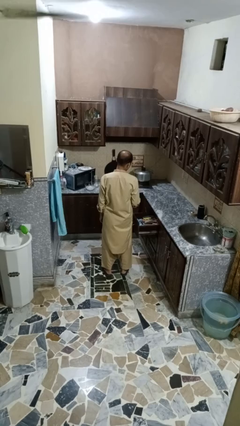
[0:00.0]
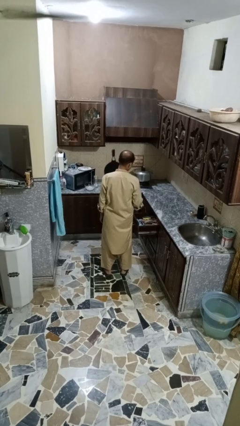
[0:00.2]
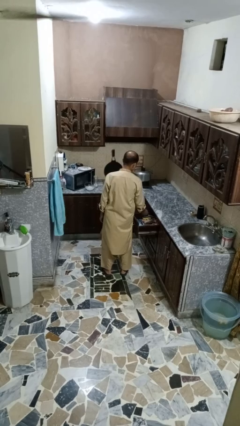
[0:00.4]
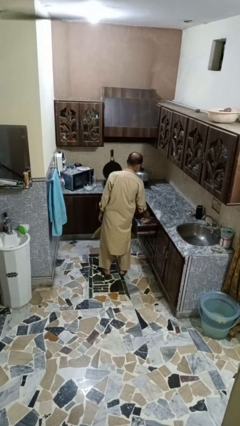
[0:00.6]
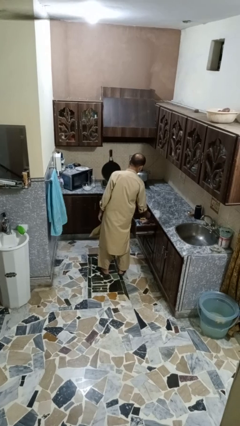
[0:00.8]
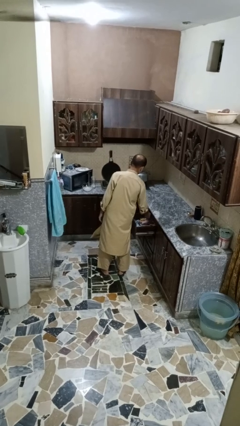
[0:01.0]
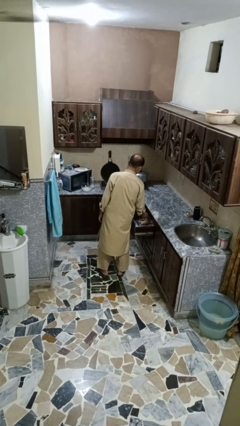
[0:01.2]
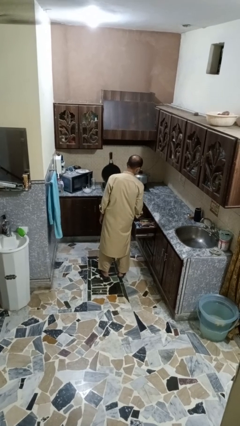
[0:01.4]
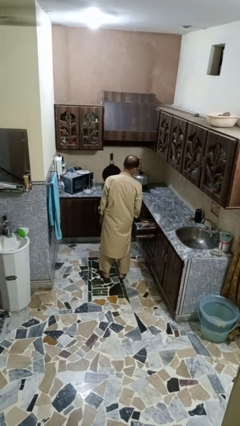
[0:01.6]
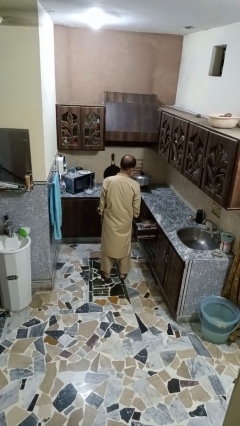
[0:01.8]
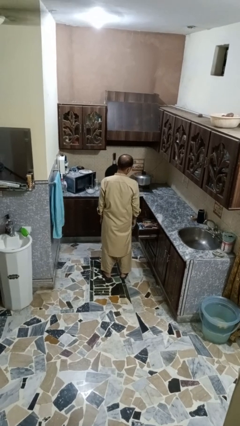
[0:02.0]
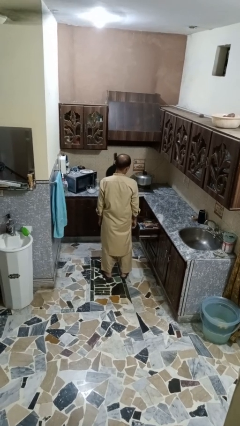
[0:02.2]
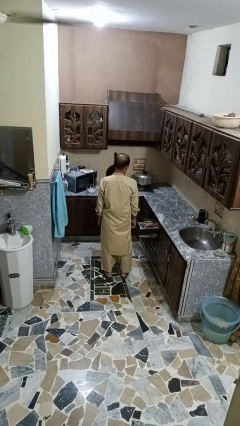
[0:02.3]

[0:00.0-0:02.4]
person puts object into kitchen drawer

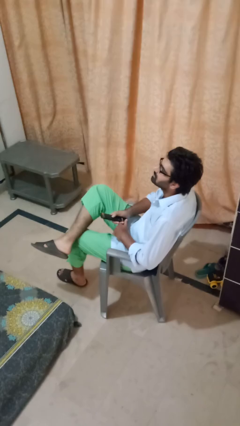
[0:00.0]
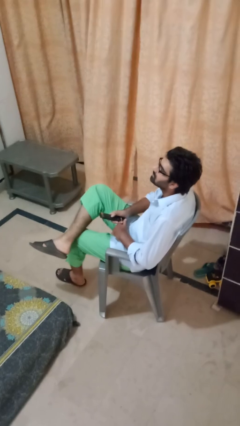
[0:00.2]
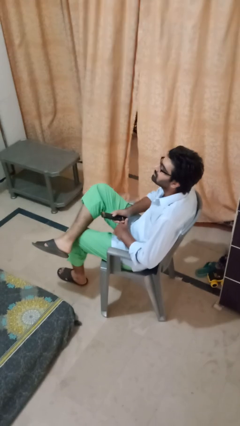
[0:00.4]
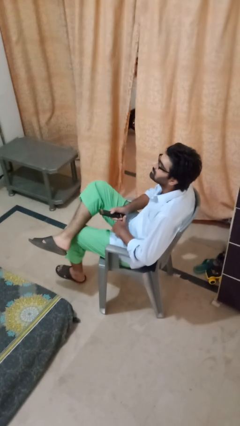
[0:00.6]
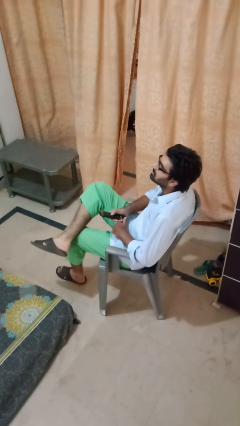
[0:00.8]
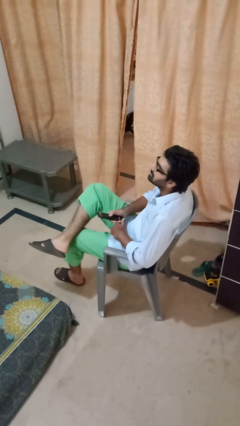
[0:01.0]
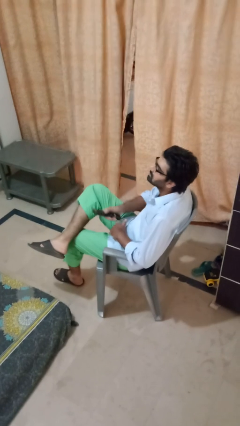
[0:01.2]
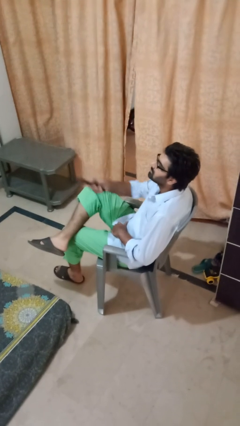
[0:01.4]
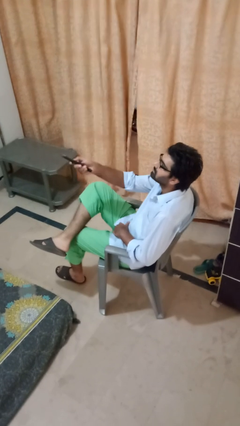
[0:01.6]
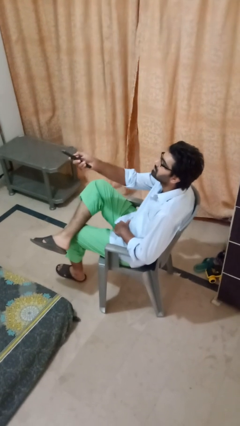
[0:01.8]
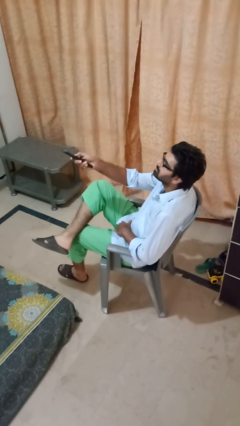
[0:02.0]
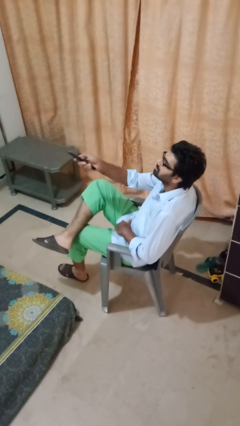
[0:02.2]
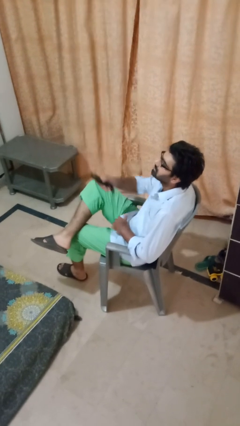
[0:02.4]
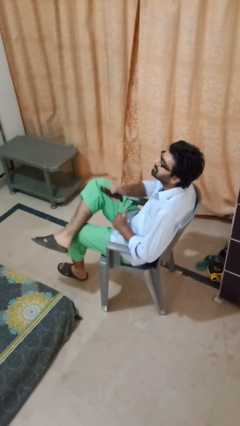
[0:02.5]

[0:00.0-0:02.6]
person uses television remote

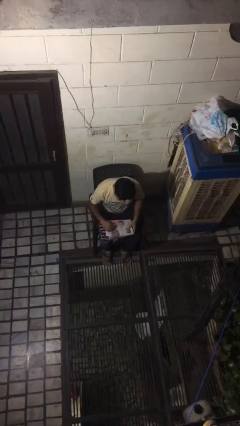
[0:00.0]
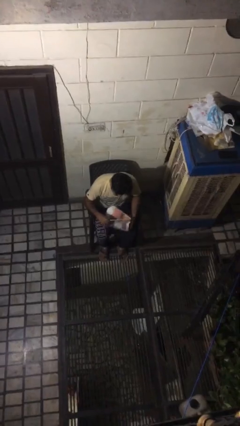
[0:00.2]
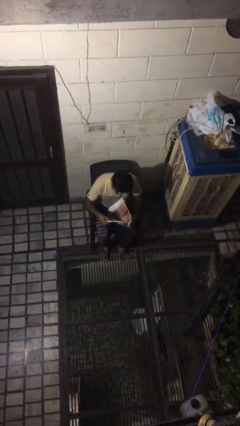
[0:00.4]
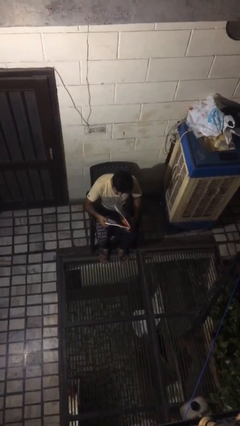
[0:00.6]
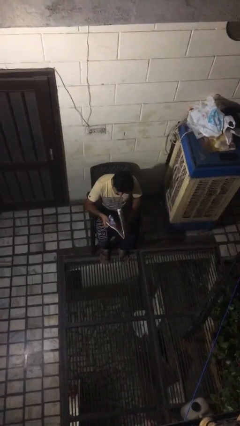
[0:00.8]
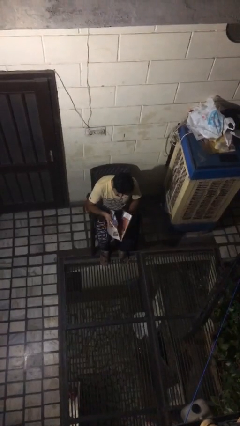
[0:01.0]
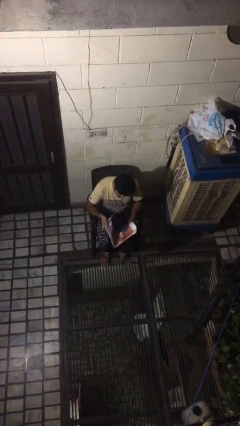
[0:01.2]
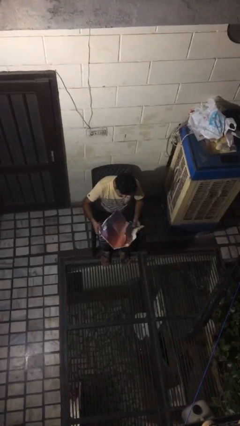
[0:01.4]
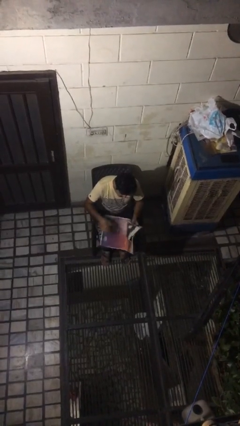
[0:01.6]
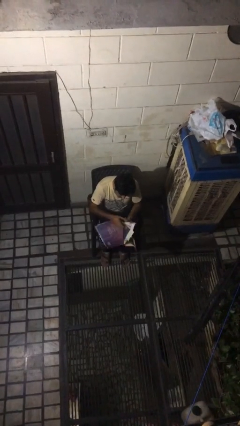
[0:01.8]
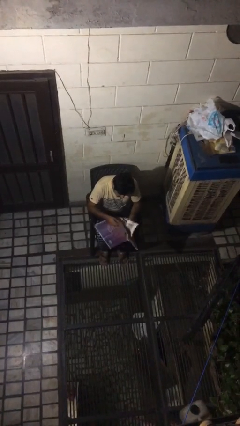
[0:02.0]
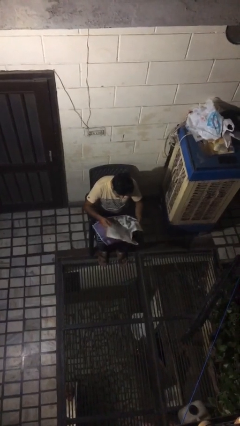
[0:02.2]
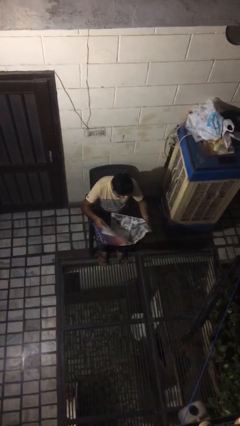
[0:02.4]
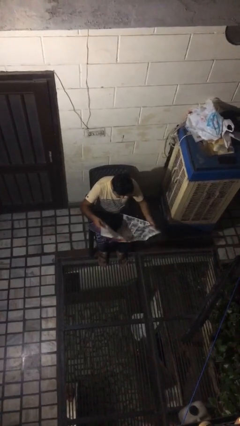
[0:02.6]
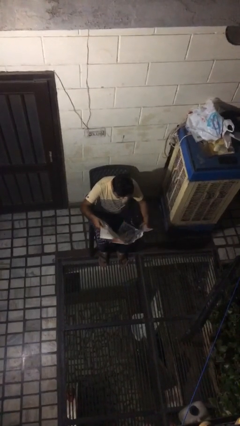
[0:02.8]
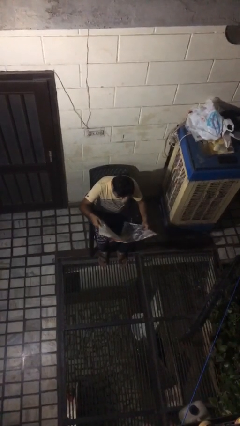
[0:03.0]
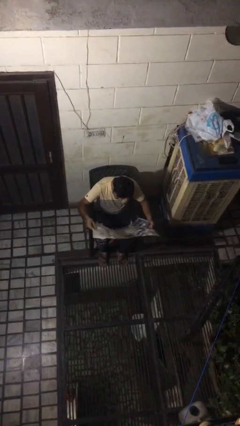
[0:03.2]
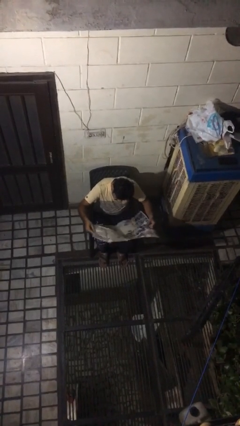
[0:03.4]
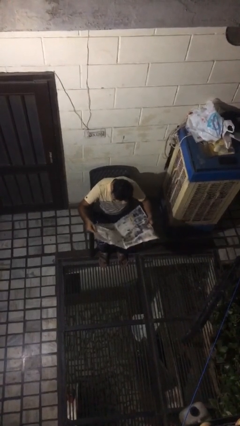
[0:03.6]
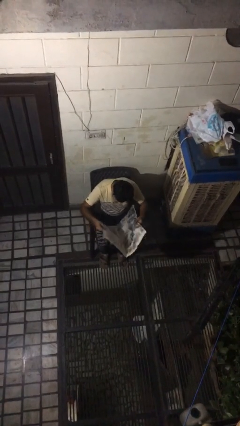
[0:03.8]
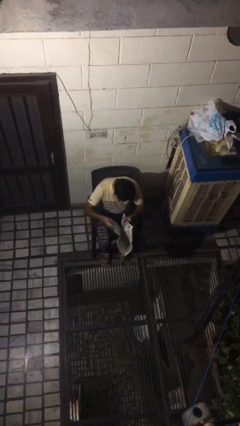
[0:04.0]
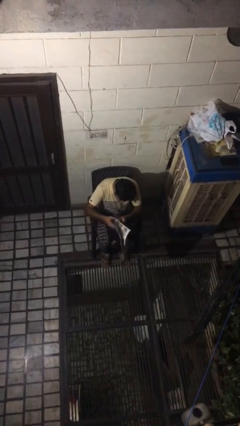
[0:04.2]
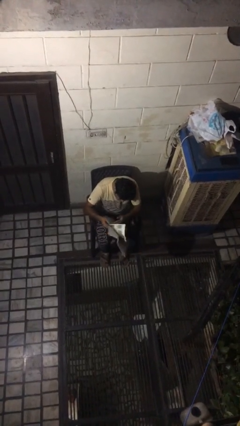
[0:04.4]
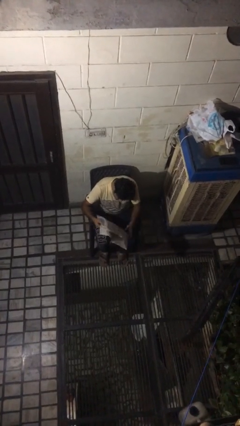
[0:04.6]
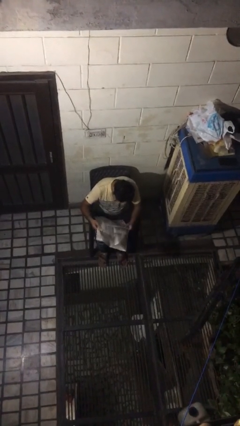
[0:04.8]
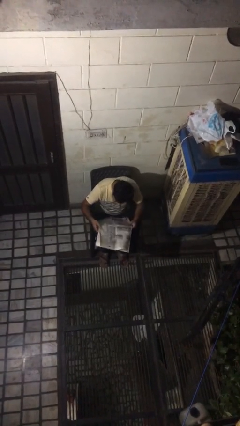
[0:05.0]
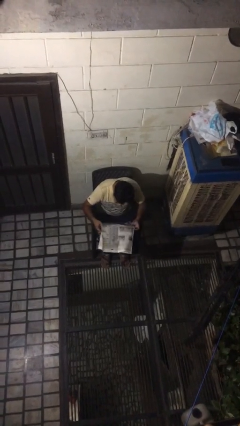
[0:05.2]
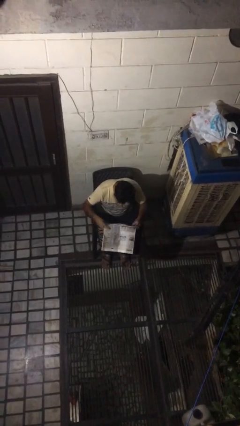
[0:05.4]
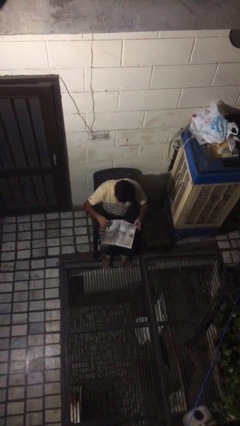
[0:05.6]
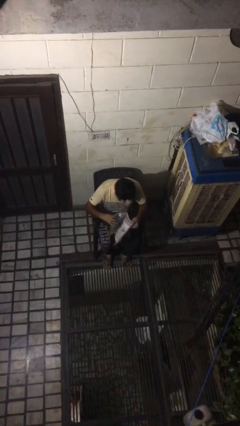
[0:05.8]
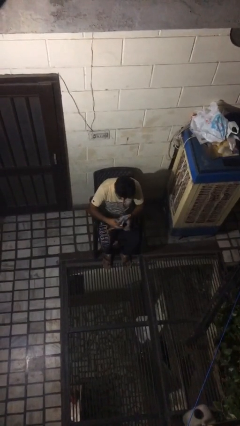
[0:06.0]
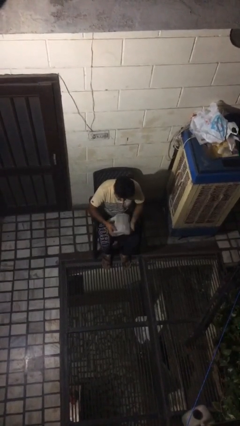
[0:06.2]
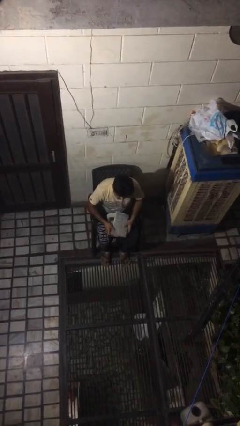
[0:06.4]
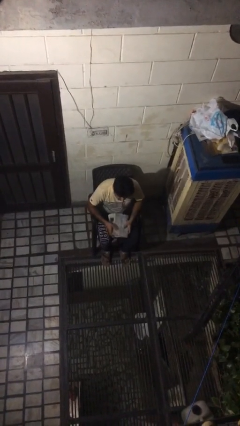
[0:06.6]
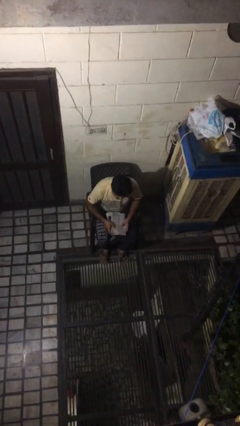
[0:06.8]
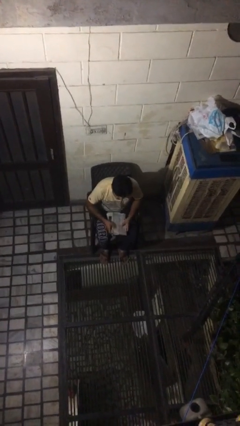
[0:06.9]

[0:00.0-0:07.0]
person reads newspaper

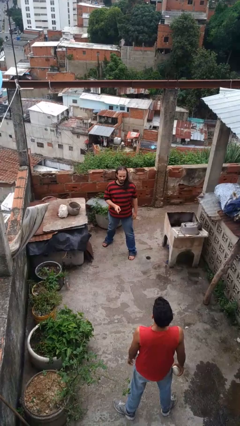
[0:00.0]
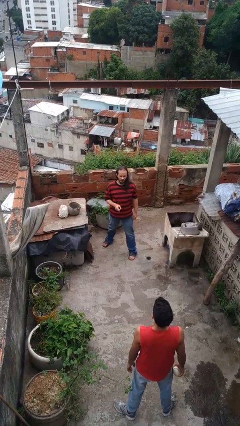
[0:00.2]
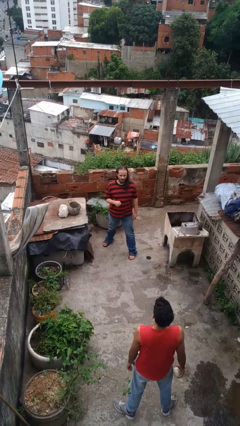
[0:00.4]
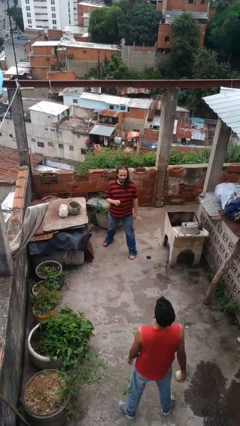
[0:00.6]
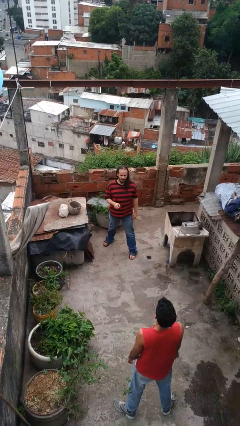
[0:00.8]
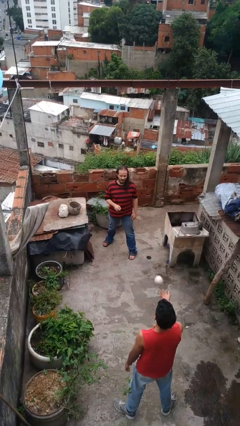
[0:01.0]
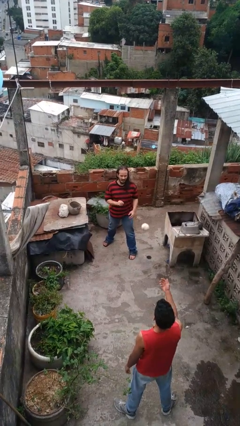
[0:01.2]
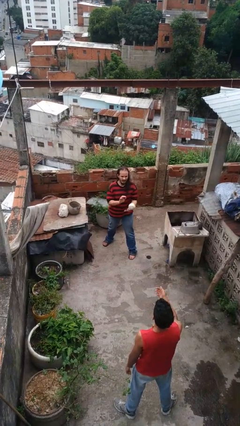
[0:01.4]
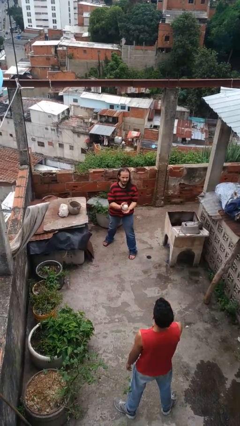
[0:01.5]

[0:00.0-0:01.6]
person catches object from person

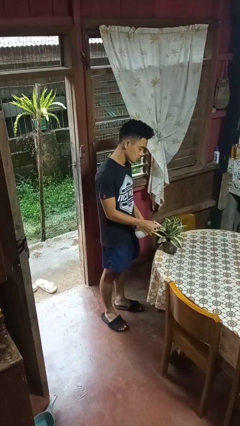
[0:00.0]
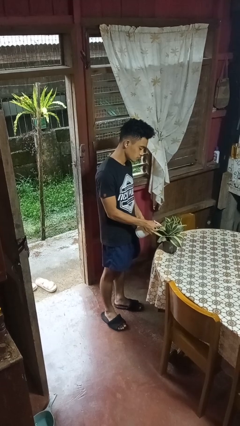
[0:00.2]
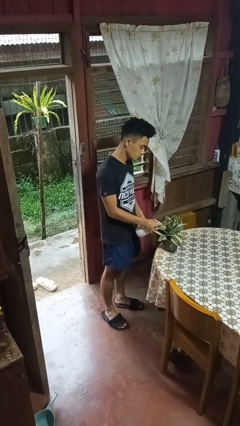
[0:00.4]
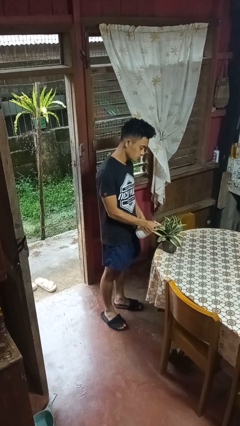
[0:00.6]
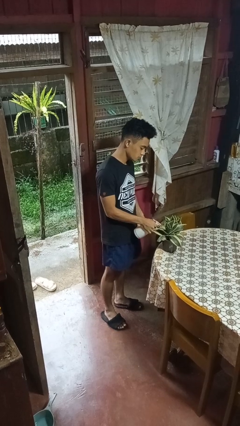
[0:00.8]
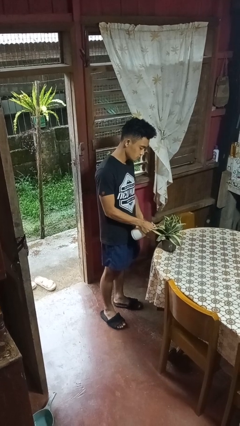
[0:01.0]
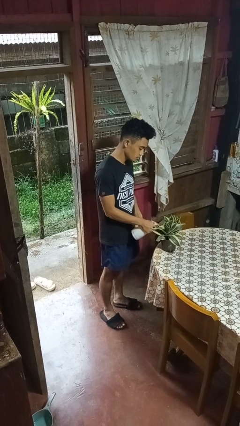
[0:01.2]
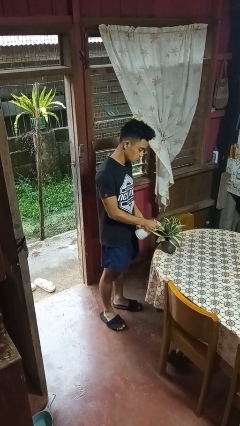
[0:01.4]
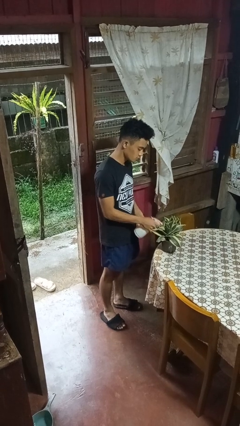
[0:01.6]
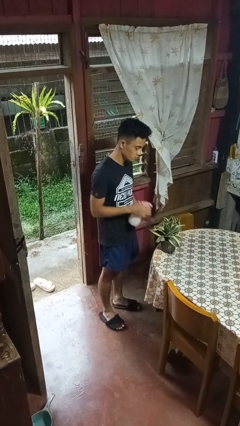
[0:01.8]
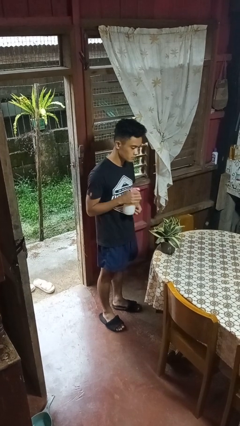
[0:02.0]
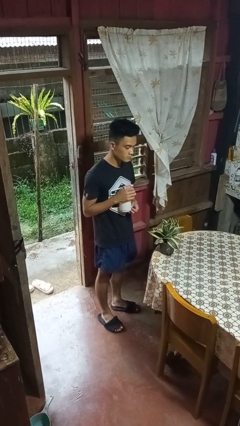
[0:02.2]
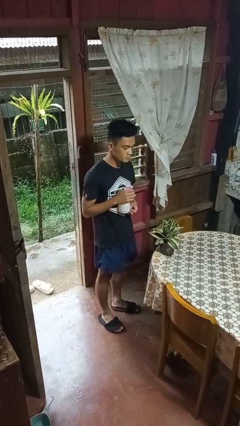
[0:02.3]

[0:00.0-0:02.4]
person waters houseplant

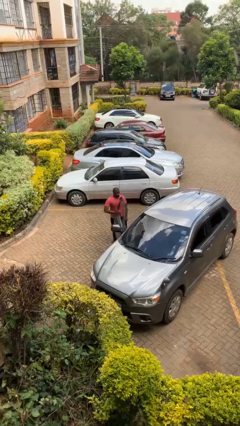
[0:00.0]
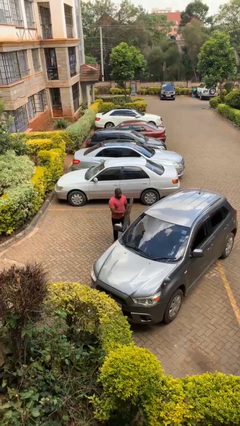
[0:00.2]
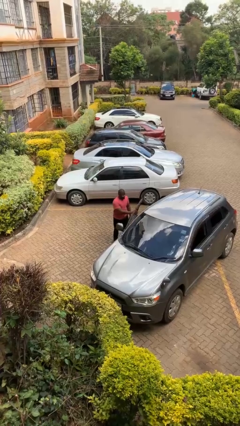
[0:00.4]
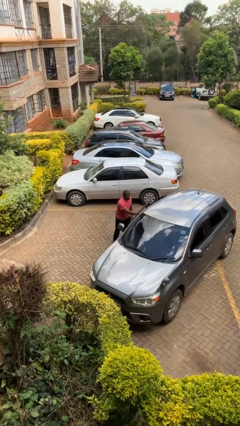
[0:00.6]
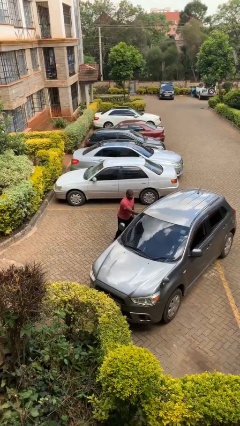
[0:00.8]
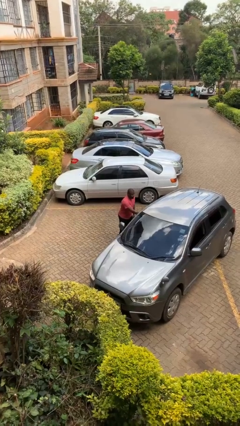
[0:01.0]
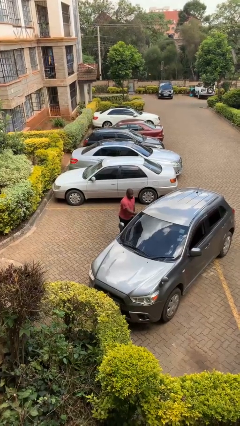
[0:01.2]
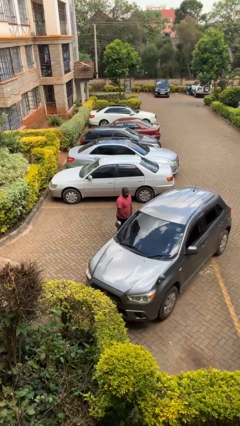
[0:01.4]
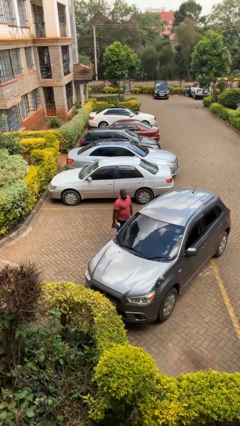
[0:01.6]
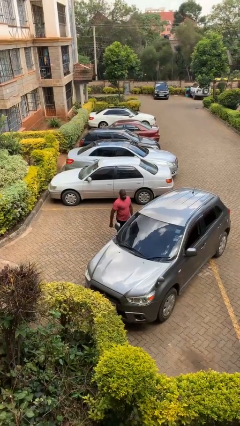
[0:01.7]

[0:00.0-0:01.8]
person closes car door
